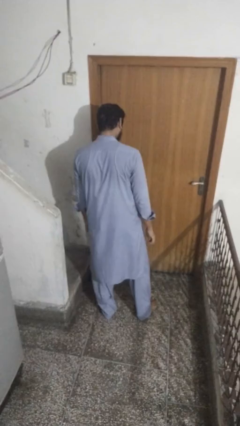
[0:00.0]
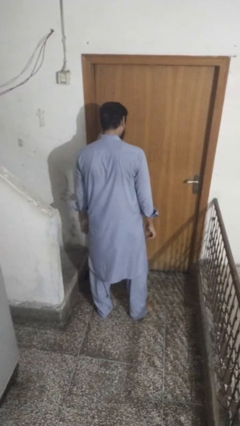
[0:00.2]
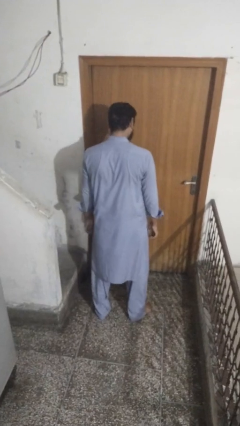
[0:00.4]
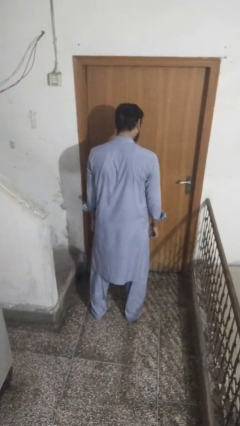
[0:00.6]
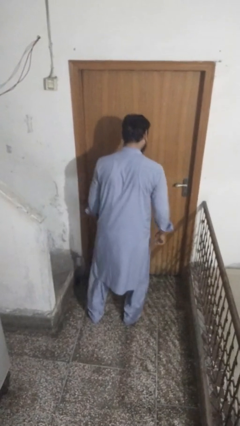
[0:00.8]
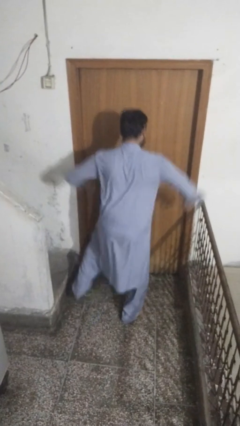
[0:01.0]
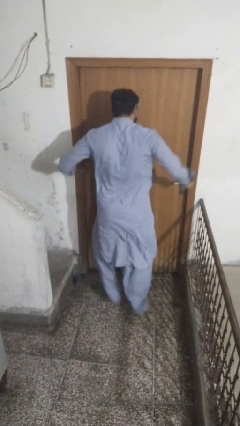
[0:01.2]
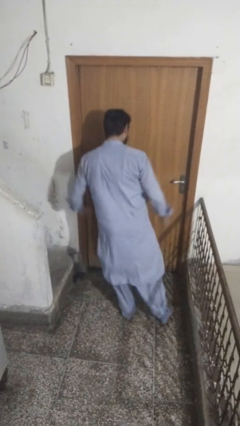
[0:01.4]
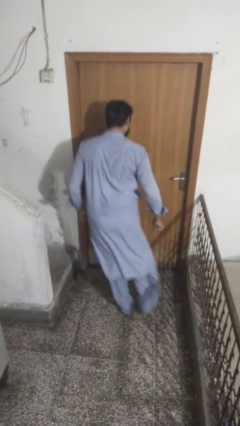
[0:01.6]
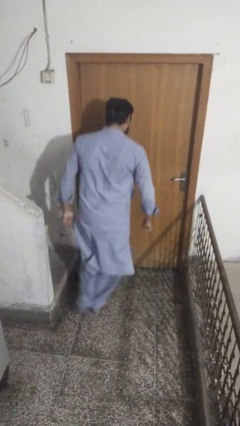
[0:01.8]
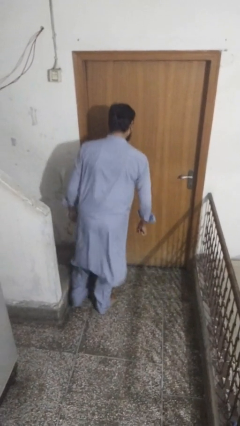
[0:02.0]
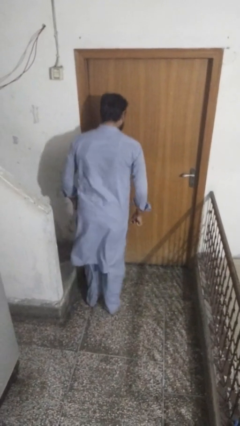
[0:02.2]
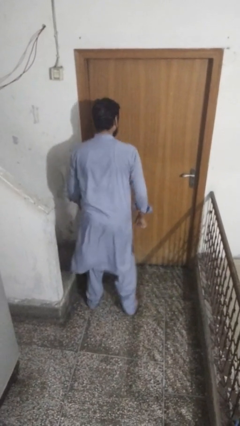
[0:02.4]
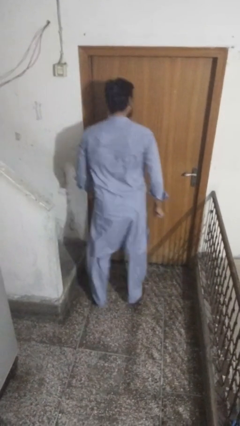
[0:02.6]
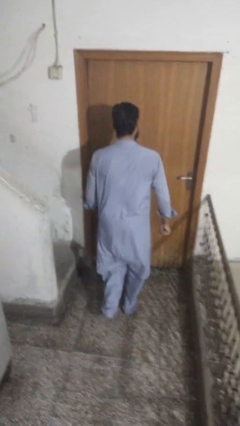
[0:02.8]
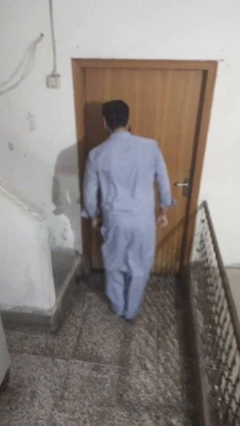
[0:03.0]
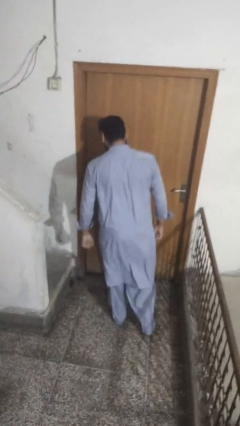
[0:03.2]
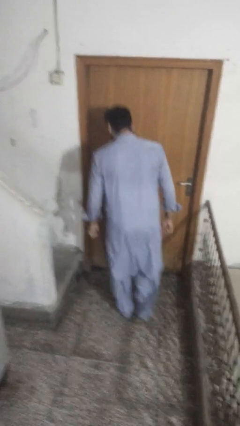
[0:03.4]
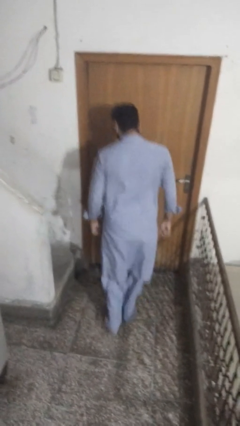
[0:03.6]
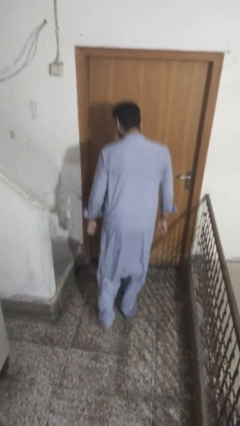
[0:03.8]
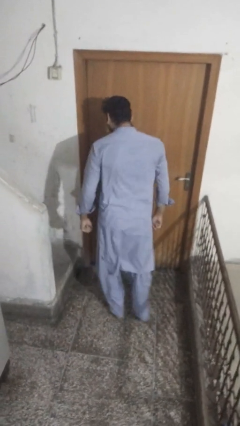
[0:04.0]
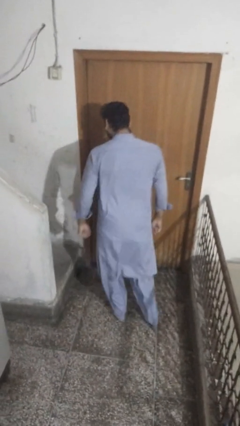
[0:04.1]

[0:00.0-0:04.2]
person dances in place

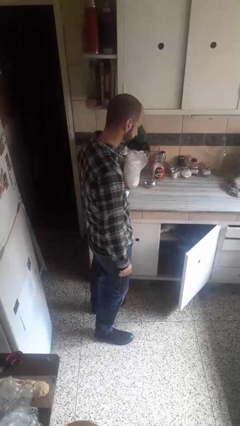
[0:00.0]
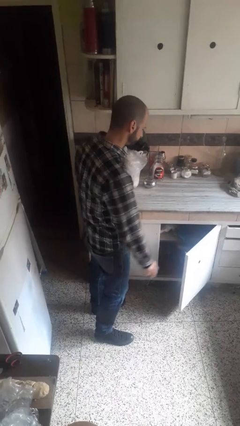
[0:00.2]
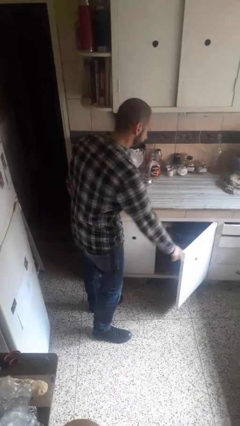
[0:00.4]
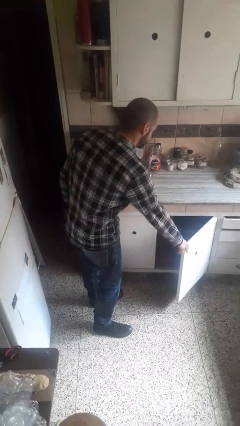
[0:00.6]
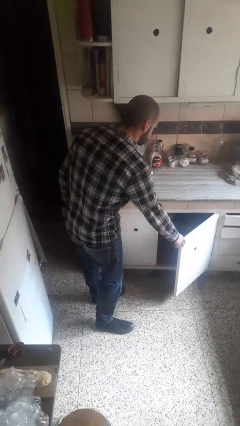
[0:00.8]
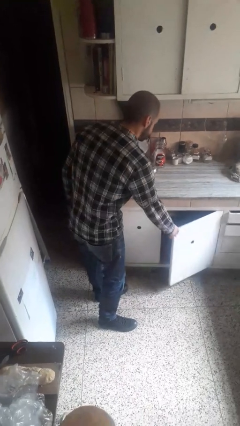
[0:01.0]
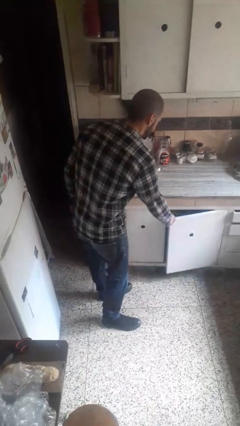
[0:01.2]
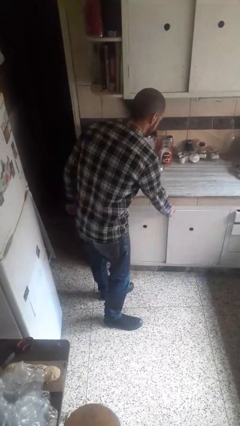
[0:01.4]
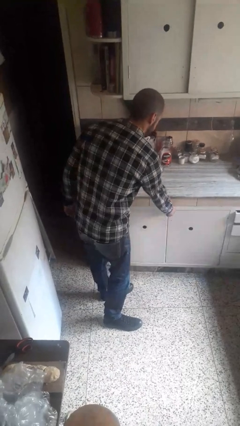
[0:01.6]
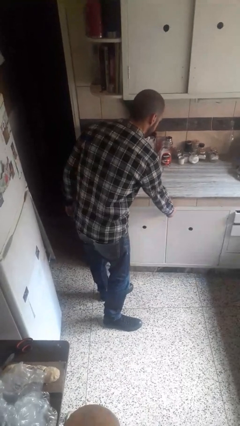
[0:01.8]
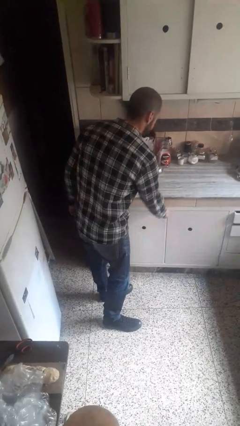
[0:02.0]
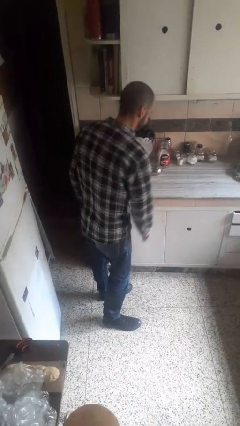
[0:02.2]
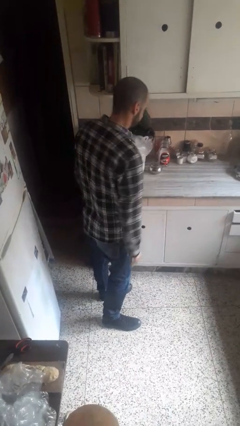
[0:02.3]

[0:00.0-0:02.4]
person closes closet door

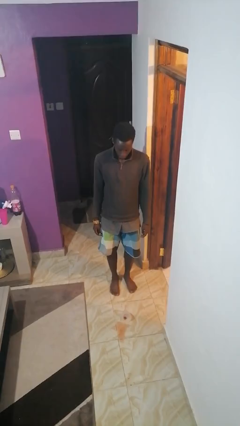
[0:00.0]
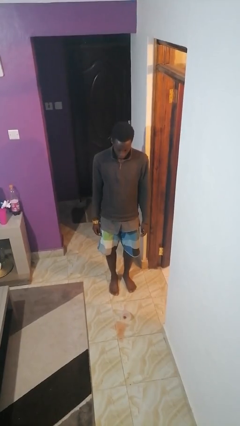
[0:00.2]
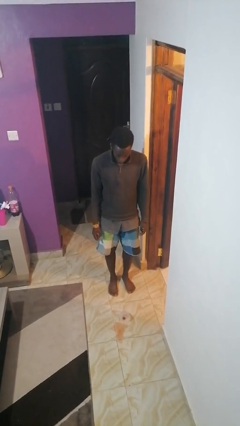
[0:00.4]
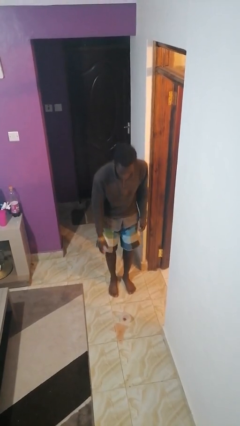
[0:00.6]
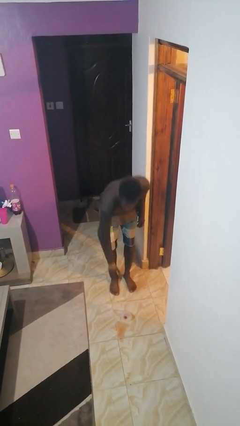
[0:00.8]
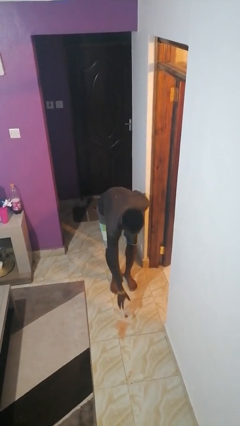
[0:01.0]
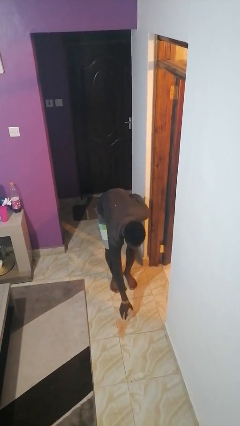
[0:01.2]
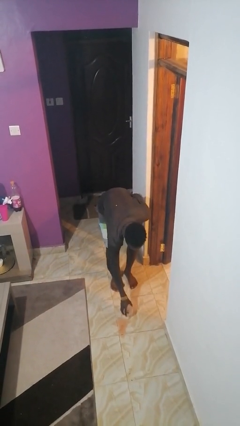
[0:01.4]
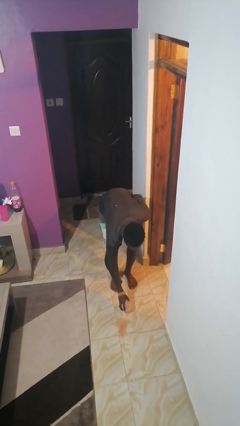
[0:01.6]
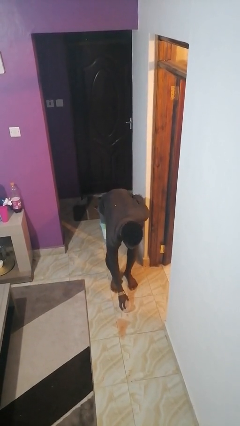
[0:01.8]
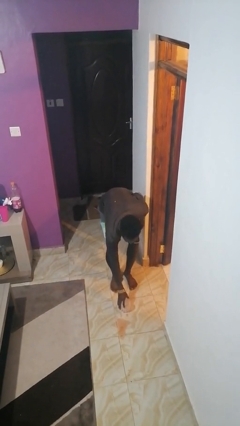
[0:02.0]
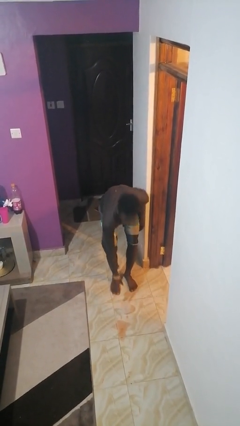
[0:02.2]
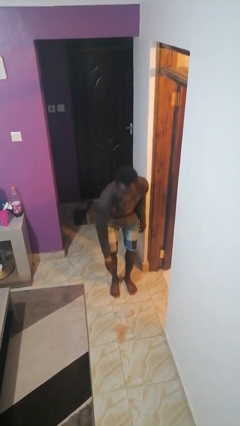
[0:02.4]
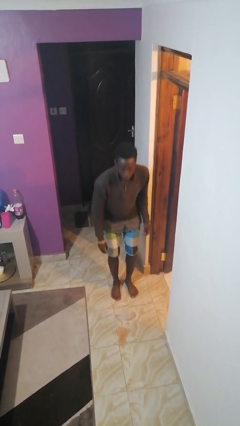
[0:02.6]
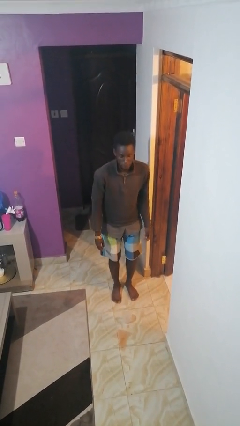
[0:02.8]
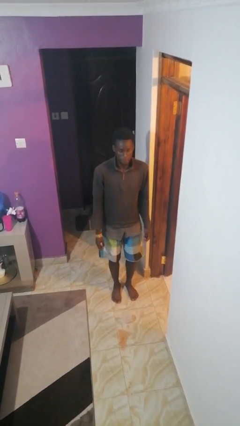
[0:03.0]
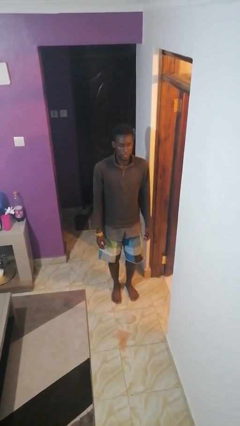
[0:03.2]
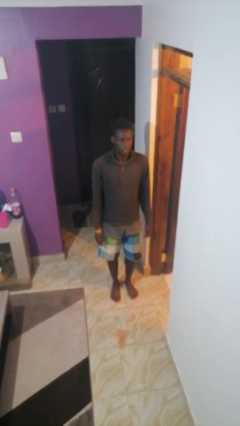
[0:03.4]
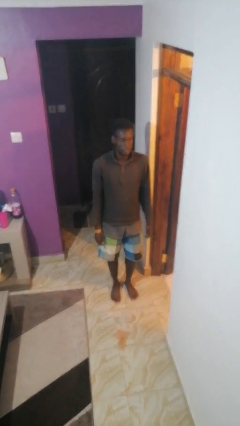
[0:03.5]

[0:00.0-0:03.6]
person sets upright glass

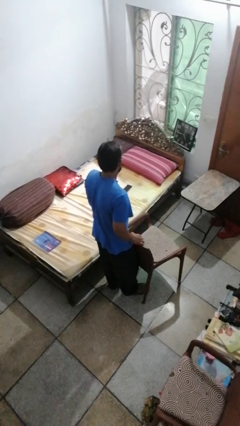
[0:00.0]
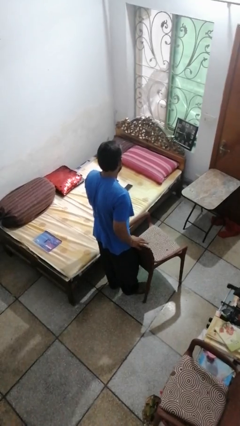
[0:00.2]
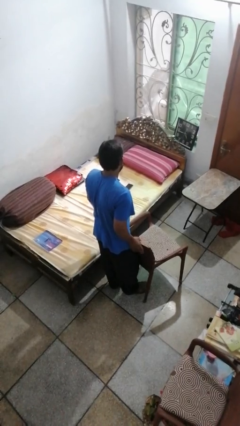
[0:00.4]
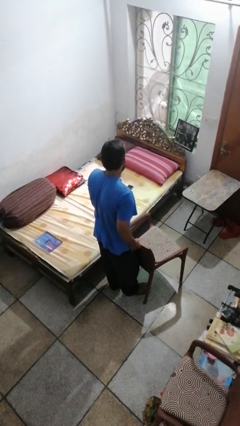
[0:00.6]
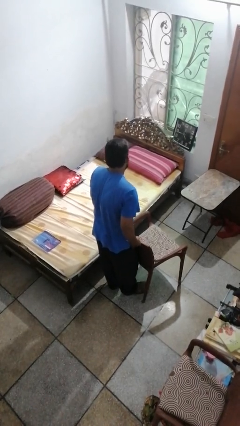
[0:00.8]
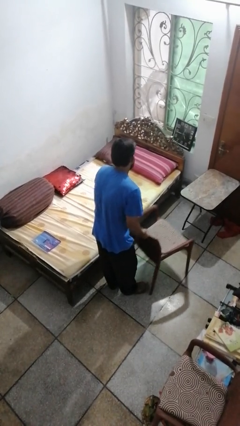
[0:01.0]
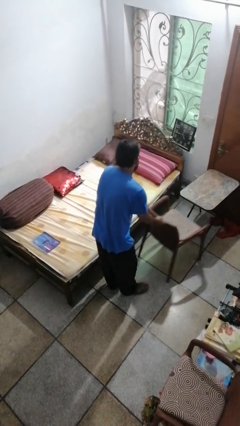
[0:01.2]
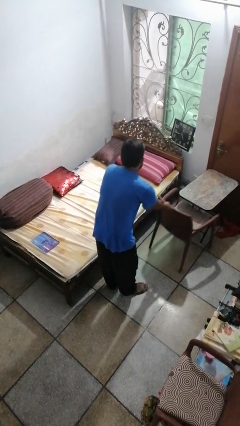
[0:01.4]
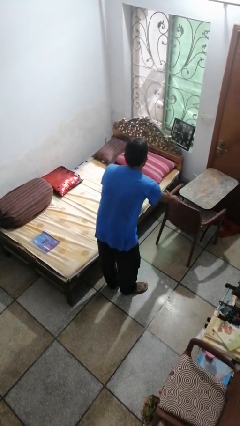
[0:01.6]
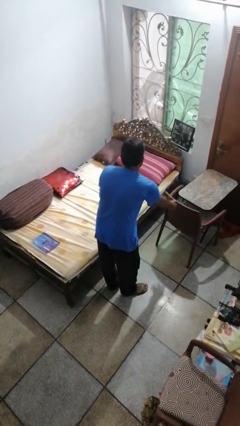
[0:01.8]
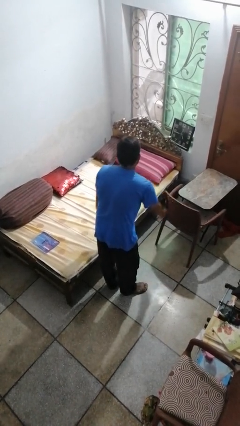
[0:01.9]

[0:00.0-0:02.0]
person pushes in chair

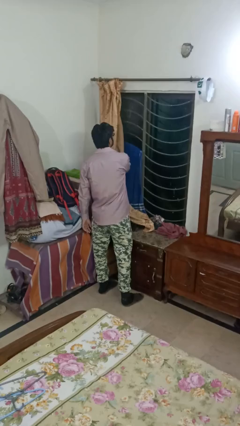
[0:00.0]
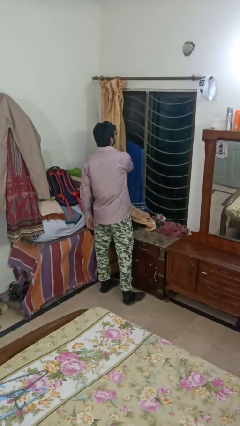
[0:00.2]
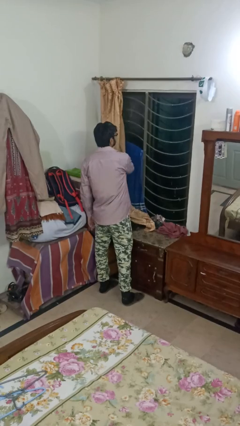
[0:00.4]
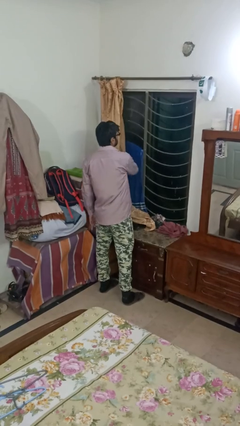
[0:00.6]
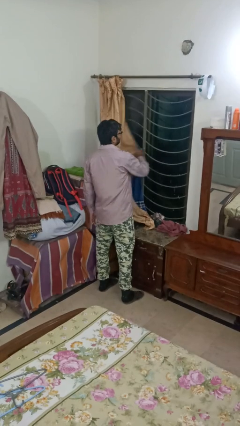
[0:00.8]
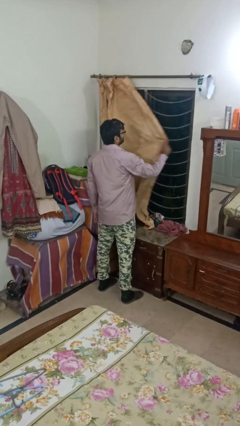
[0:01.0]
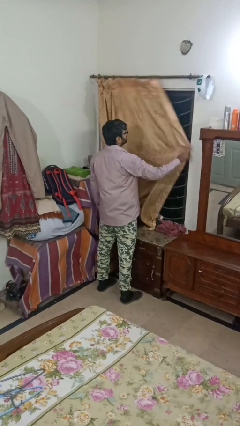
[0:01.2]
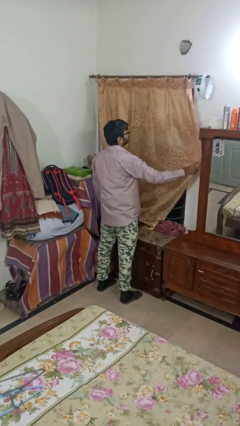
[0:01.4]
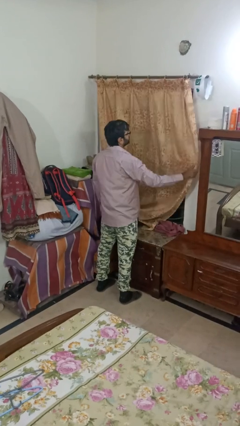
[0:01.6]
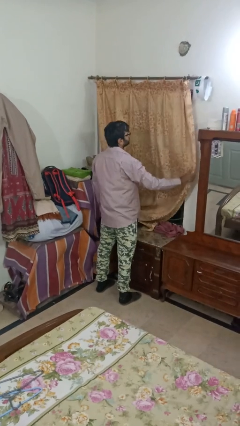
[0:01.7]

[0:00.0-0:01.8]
person closes curtains

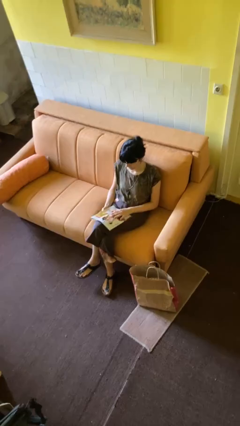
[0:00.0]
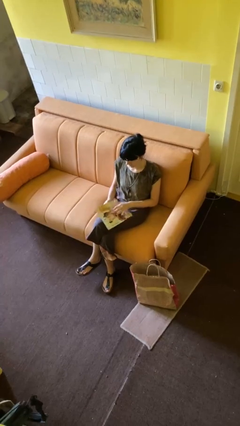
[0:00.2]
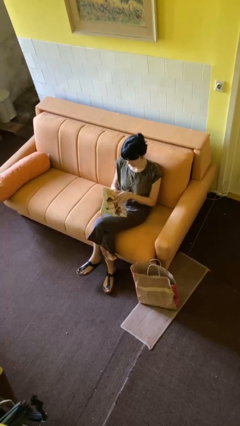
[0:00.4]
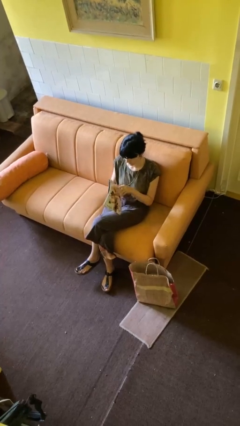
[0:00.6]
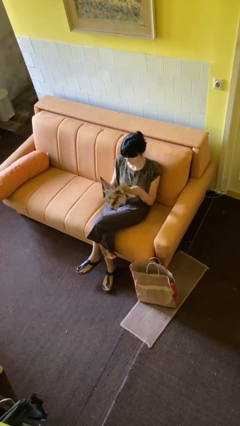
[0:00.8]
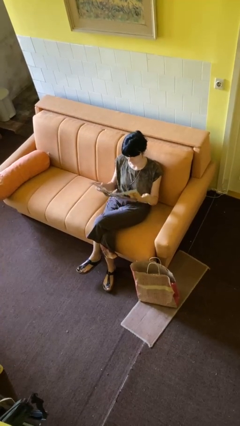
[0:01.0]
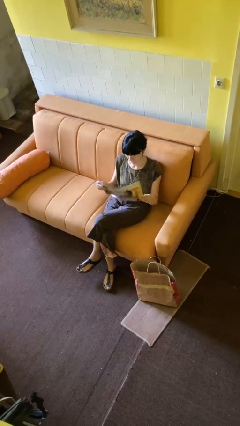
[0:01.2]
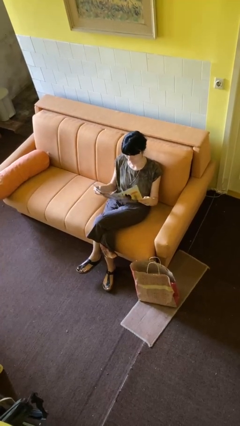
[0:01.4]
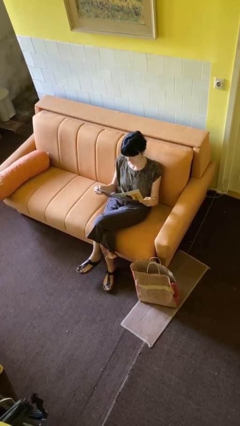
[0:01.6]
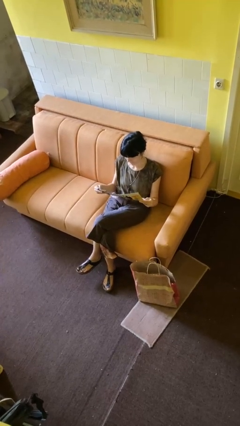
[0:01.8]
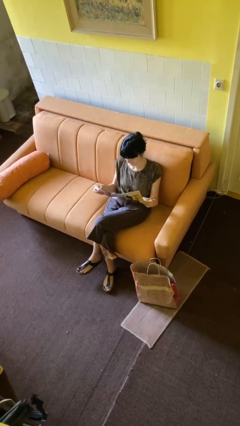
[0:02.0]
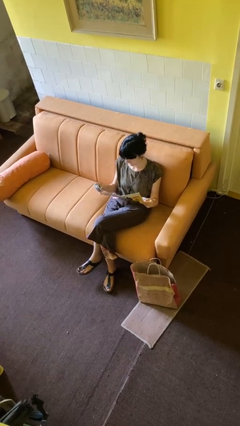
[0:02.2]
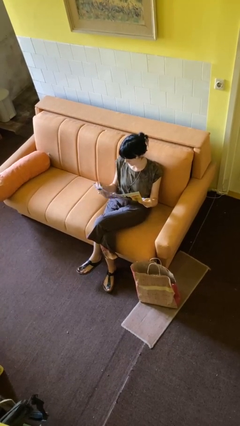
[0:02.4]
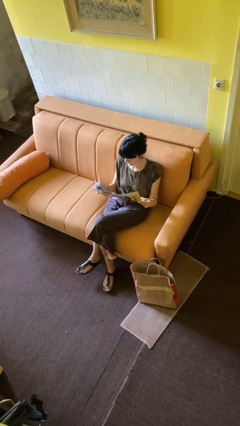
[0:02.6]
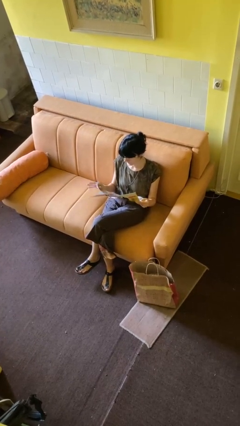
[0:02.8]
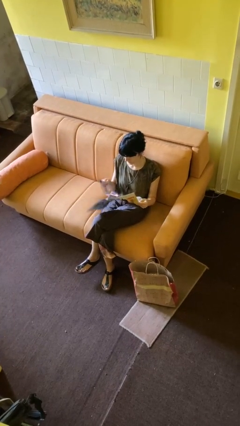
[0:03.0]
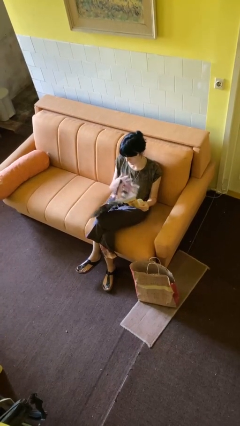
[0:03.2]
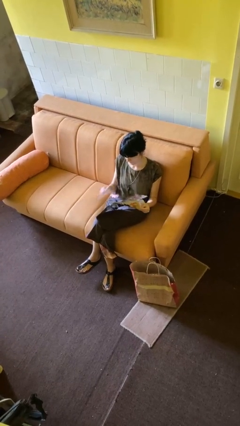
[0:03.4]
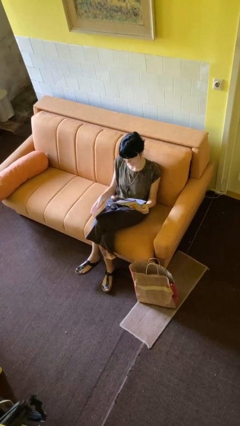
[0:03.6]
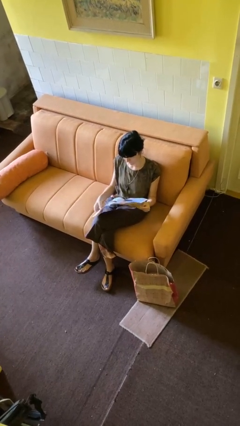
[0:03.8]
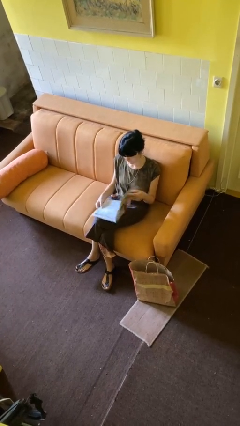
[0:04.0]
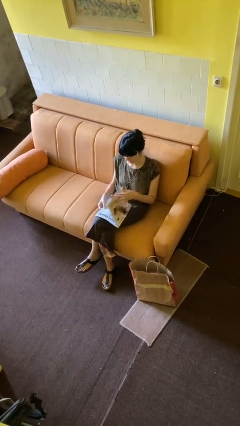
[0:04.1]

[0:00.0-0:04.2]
person reads magazine
